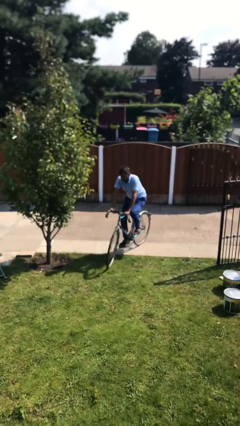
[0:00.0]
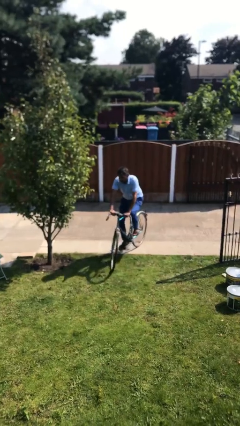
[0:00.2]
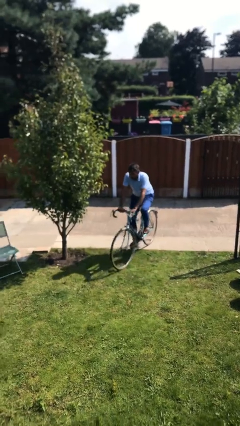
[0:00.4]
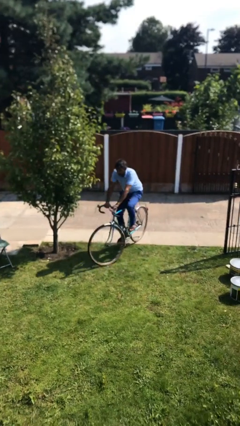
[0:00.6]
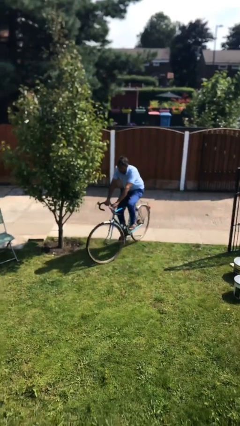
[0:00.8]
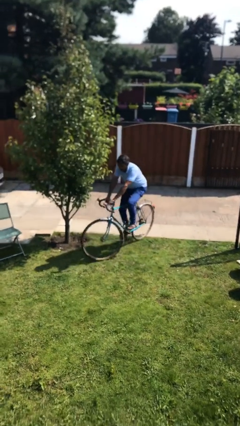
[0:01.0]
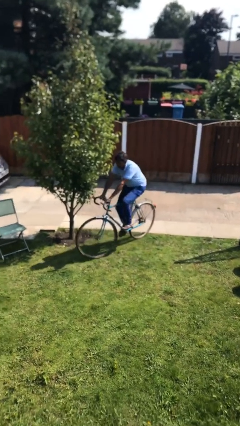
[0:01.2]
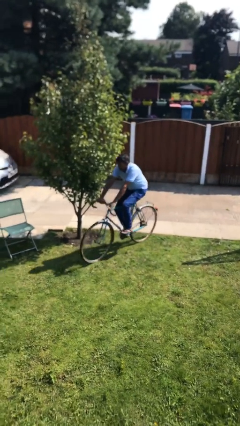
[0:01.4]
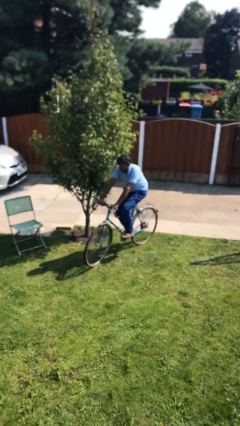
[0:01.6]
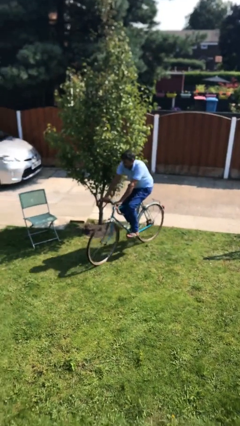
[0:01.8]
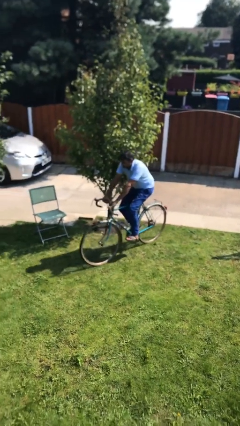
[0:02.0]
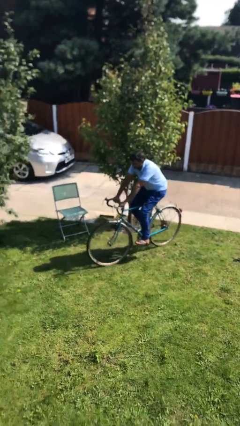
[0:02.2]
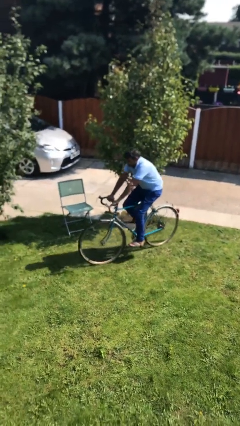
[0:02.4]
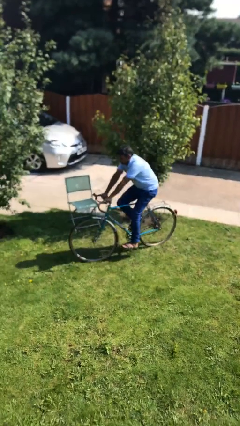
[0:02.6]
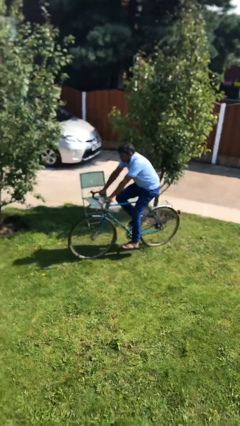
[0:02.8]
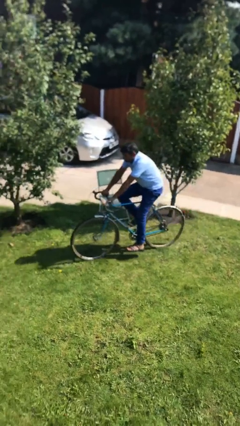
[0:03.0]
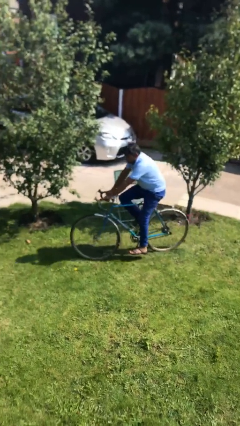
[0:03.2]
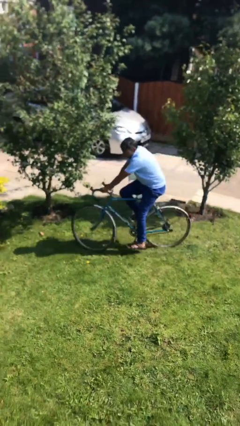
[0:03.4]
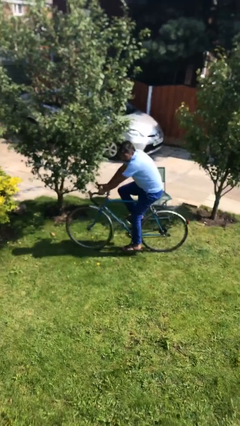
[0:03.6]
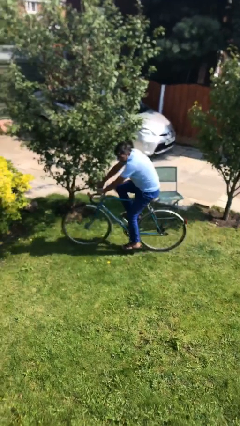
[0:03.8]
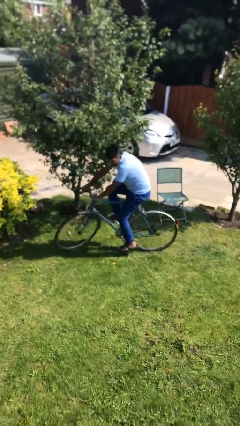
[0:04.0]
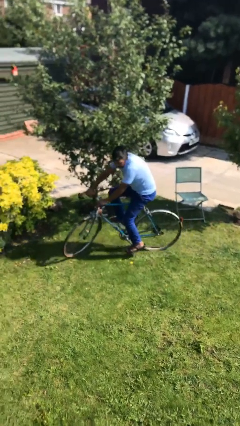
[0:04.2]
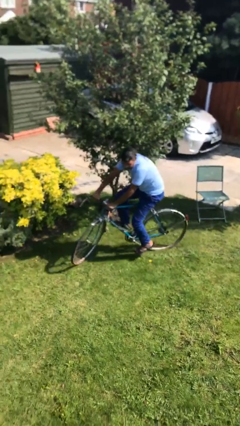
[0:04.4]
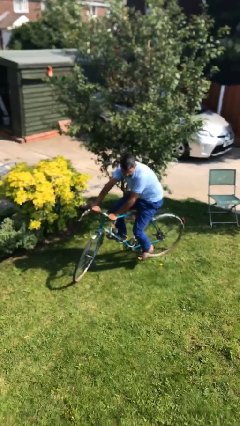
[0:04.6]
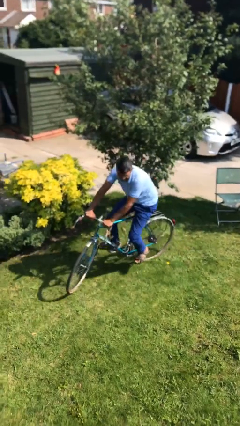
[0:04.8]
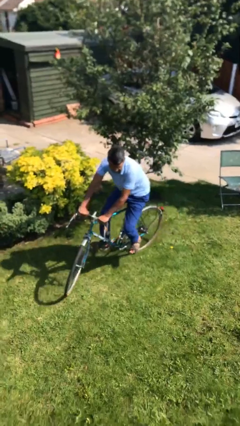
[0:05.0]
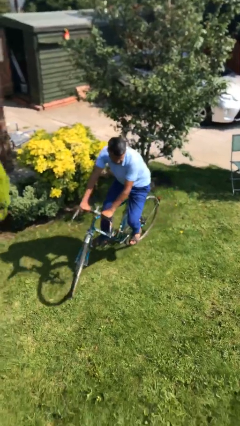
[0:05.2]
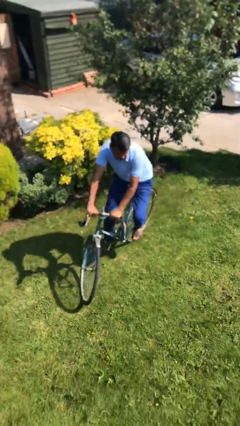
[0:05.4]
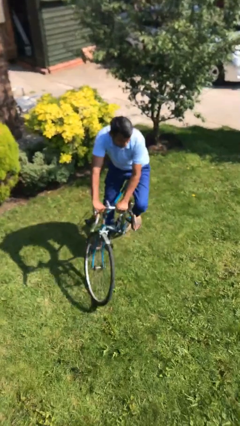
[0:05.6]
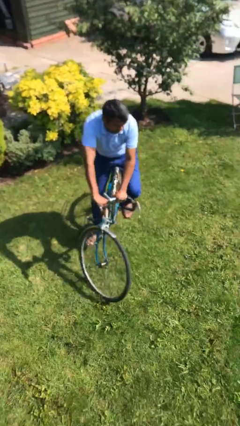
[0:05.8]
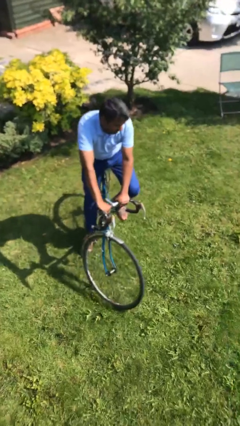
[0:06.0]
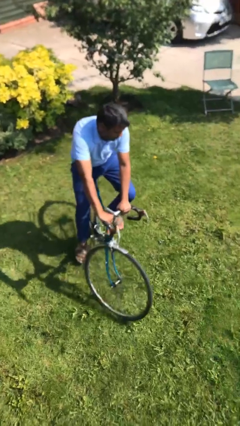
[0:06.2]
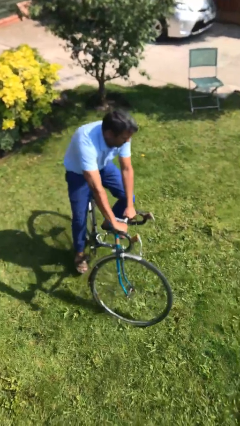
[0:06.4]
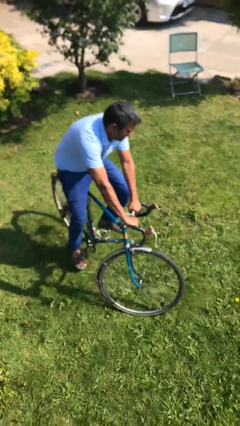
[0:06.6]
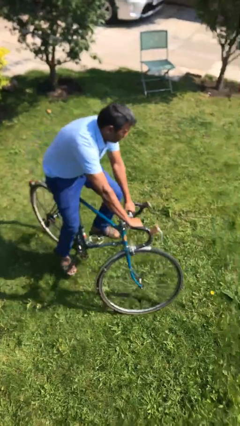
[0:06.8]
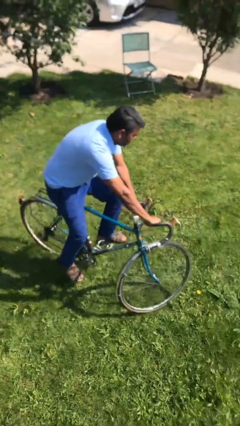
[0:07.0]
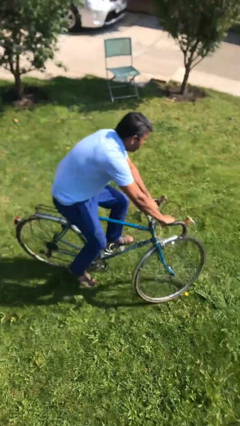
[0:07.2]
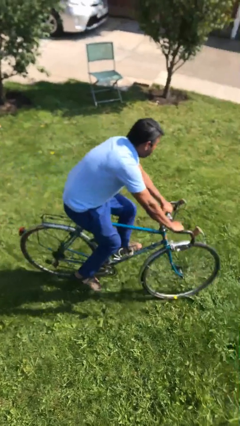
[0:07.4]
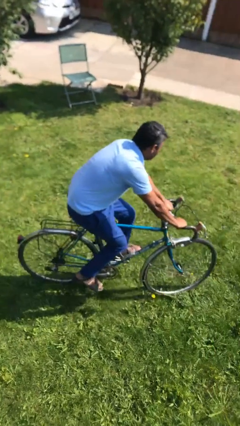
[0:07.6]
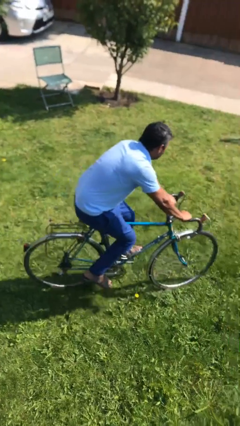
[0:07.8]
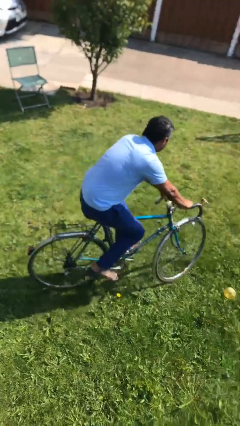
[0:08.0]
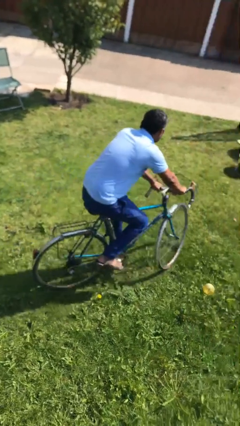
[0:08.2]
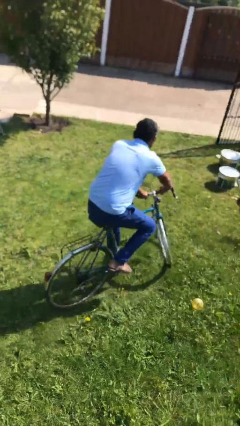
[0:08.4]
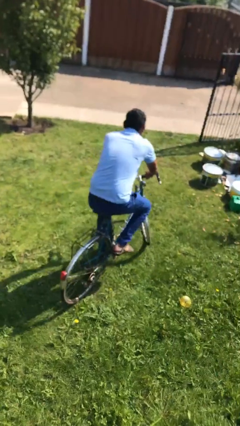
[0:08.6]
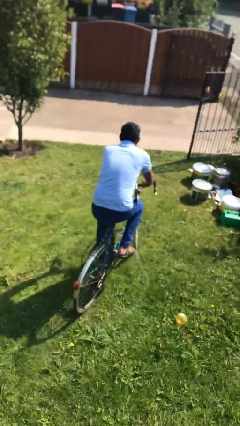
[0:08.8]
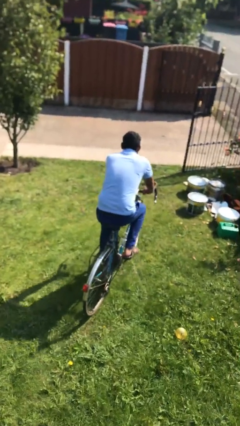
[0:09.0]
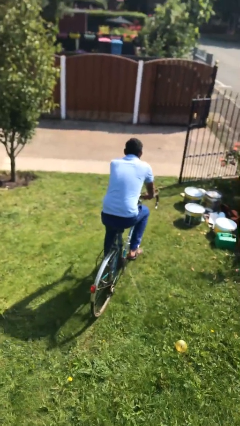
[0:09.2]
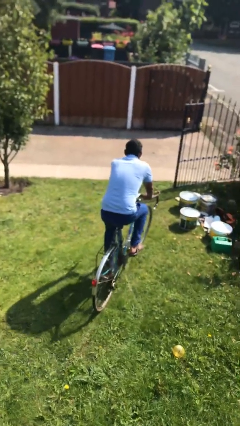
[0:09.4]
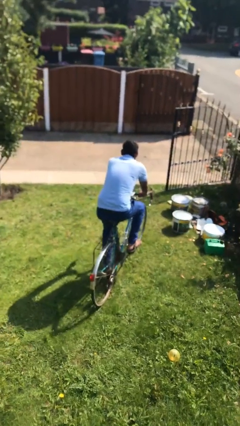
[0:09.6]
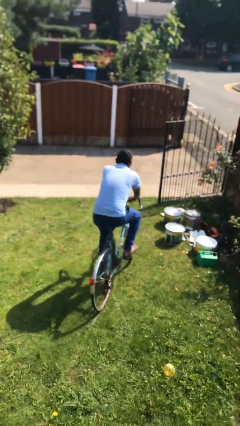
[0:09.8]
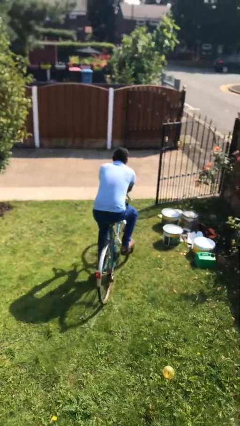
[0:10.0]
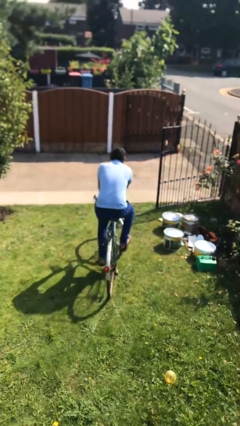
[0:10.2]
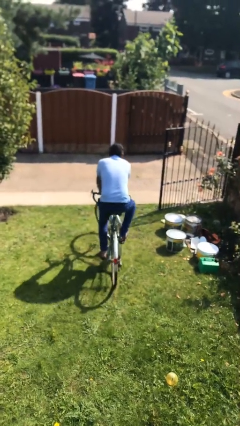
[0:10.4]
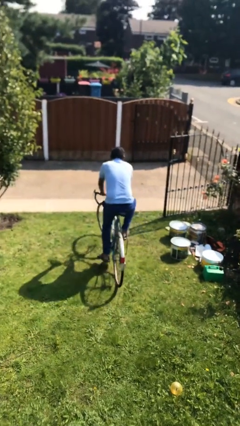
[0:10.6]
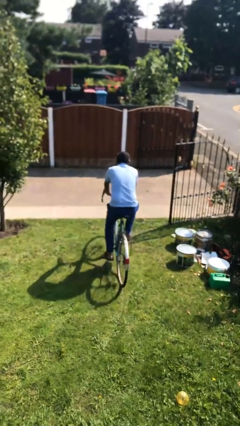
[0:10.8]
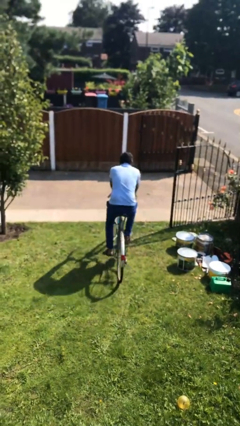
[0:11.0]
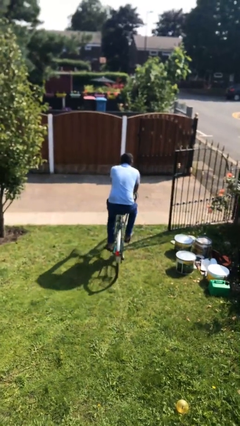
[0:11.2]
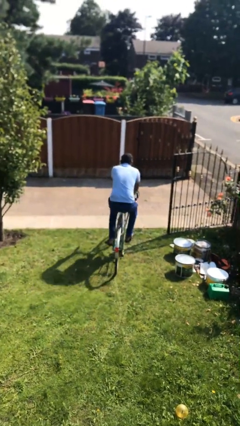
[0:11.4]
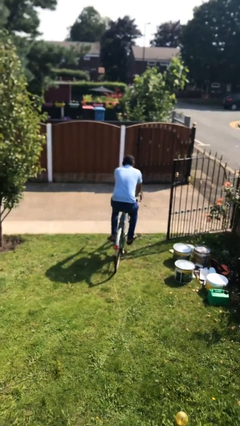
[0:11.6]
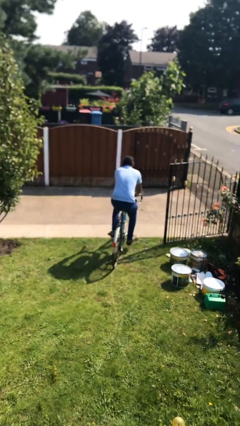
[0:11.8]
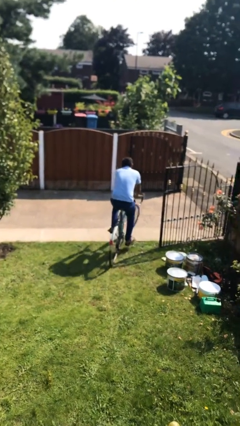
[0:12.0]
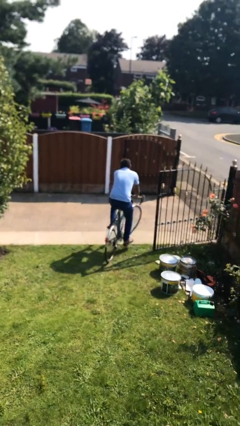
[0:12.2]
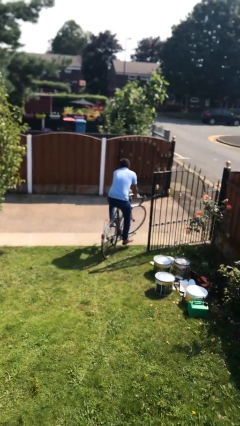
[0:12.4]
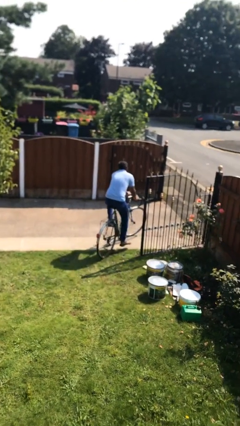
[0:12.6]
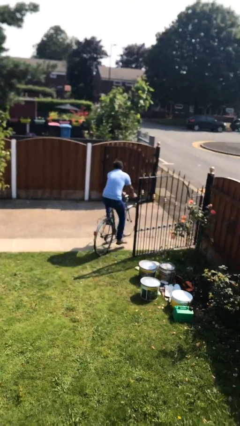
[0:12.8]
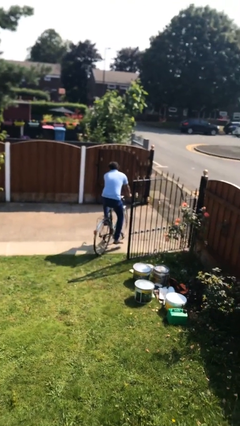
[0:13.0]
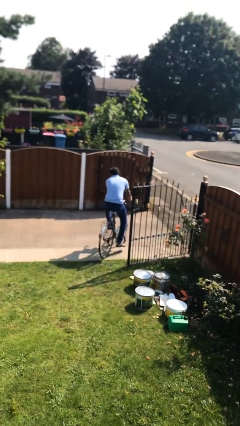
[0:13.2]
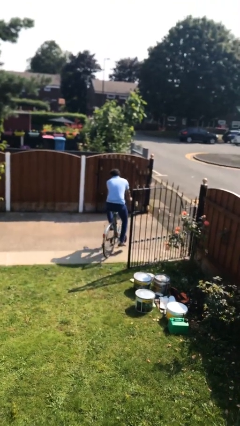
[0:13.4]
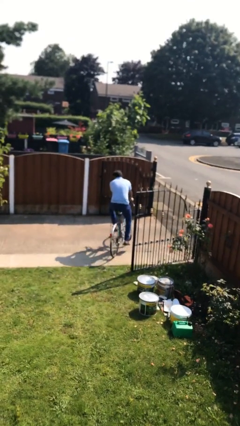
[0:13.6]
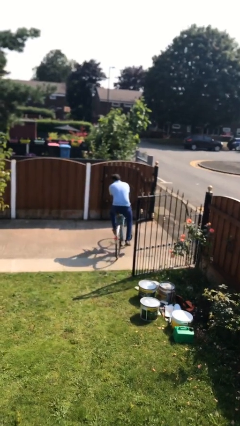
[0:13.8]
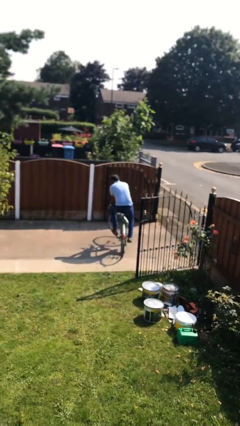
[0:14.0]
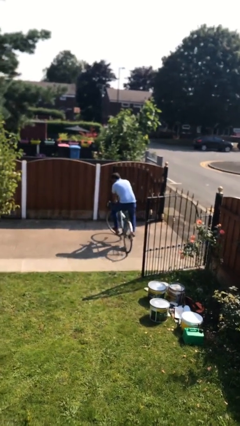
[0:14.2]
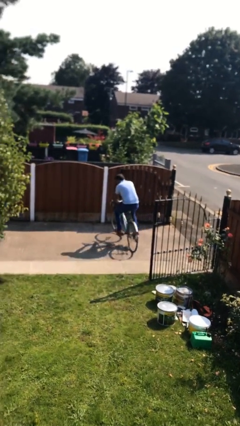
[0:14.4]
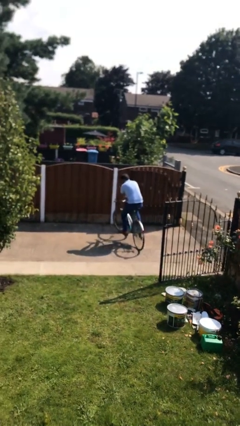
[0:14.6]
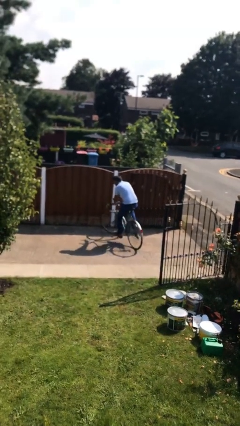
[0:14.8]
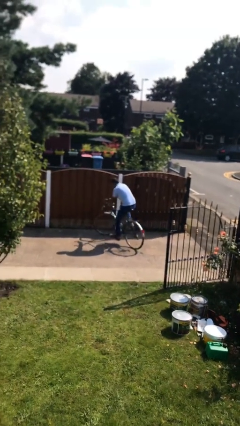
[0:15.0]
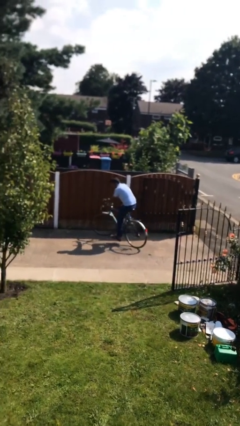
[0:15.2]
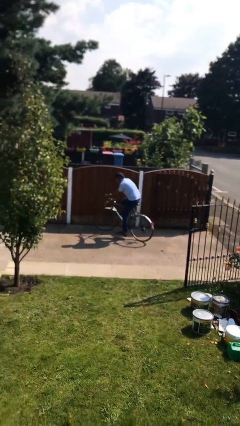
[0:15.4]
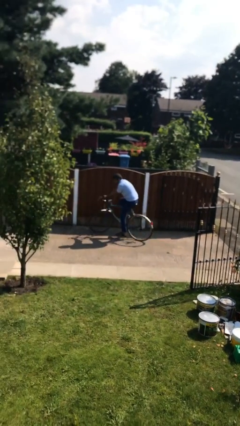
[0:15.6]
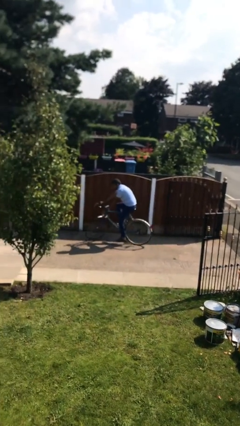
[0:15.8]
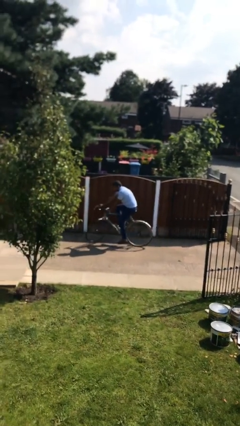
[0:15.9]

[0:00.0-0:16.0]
person rides bicycle

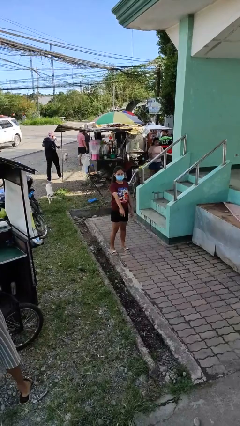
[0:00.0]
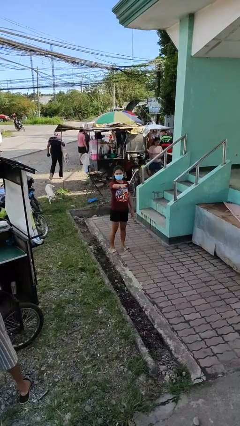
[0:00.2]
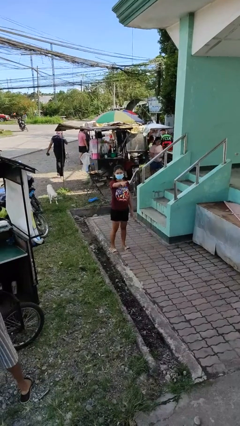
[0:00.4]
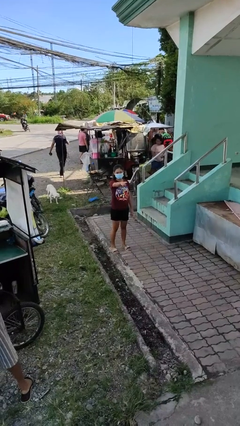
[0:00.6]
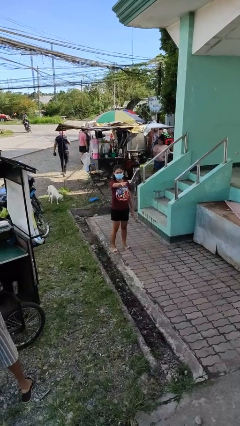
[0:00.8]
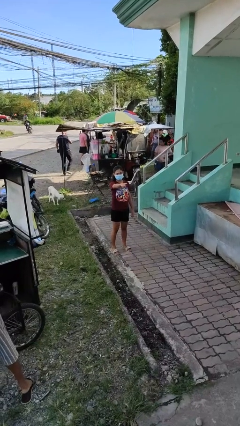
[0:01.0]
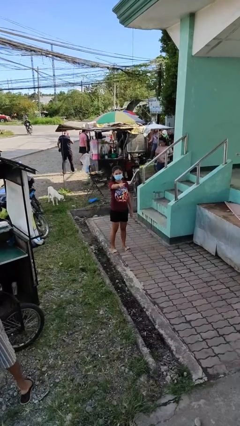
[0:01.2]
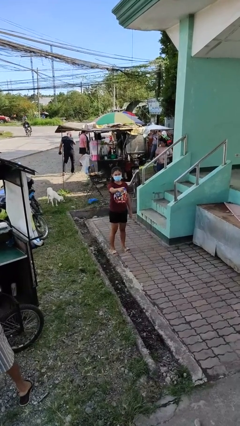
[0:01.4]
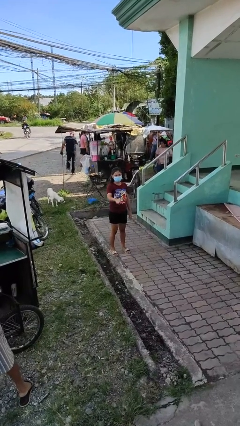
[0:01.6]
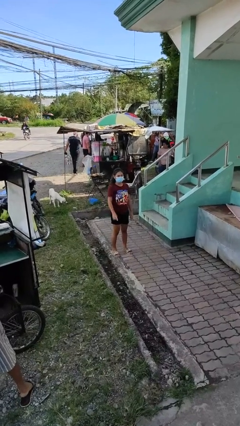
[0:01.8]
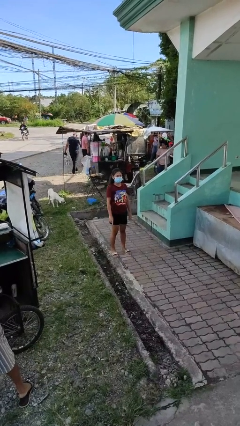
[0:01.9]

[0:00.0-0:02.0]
person points at person

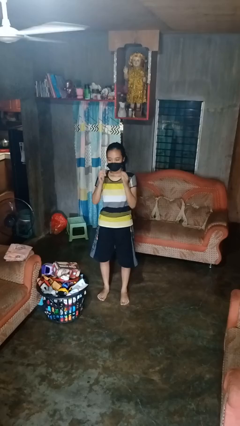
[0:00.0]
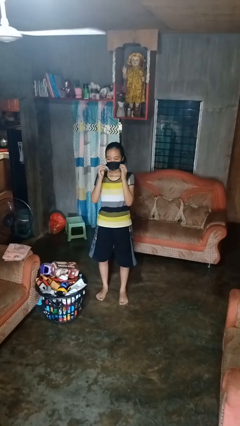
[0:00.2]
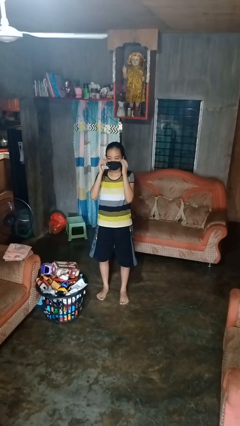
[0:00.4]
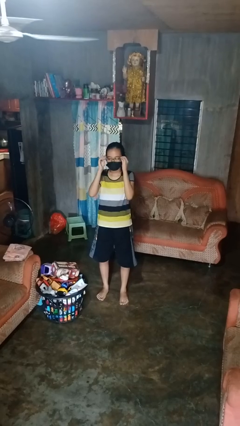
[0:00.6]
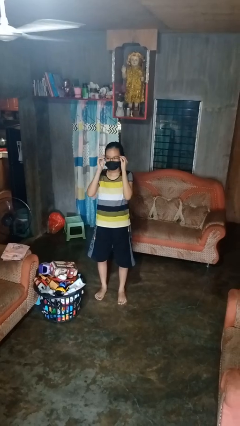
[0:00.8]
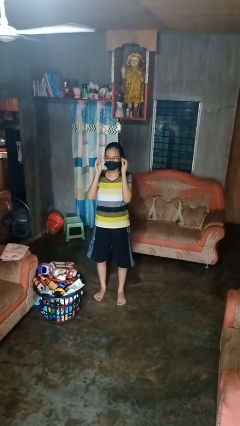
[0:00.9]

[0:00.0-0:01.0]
person puts on glasses
